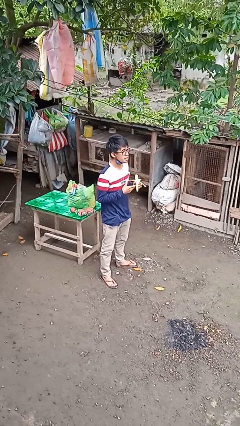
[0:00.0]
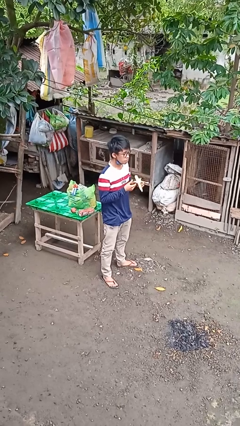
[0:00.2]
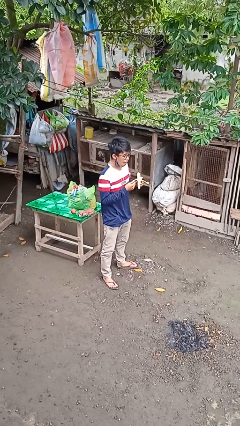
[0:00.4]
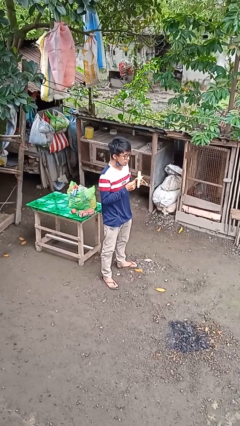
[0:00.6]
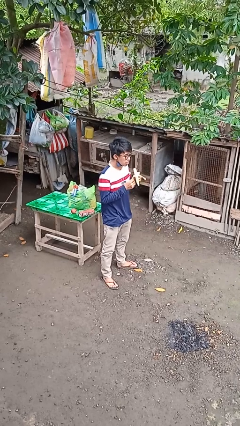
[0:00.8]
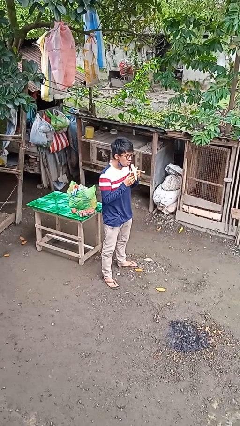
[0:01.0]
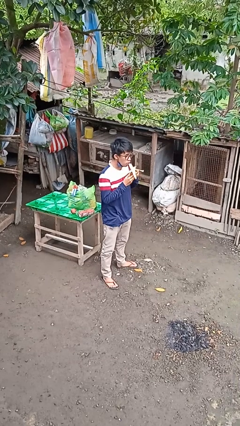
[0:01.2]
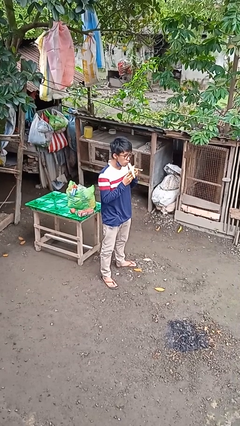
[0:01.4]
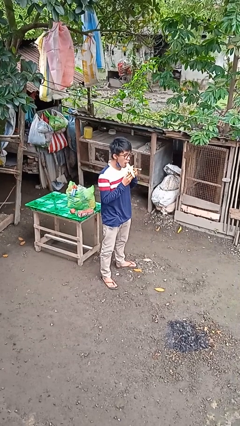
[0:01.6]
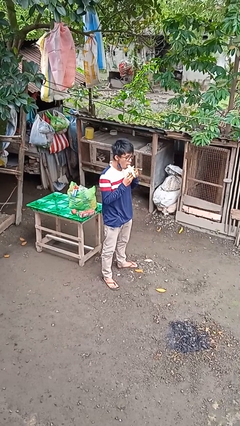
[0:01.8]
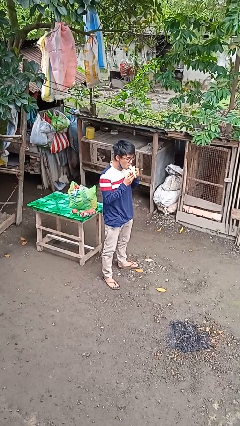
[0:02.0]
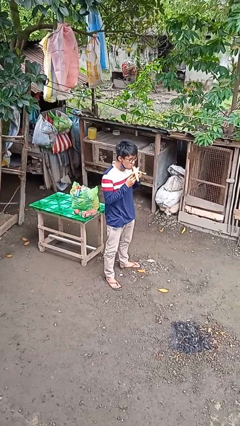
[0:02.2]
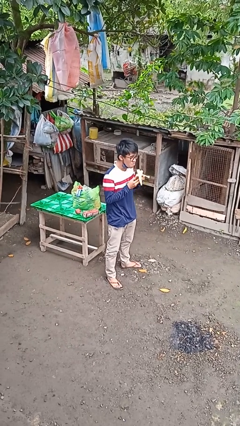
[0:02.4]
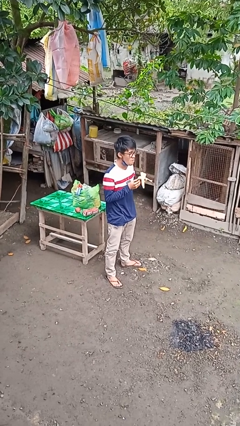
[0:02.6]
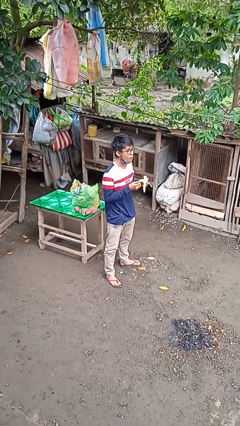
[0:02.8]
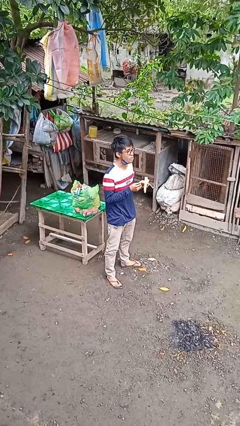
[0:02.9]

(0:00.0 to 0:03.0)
person eats banana

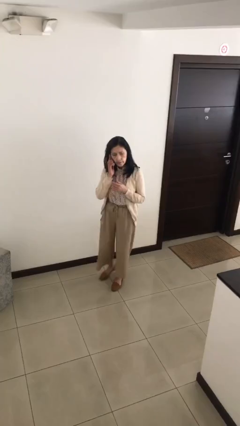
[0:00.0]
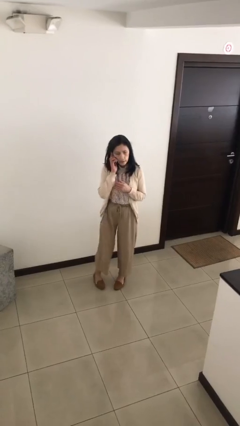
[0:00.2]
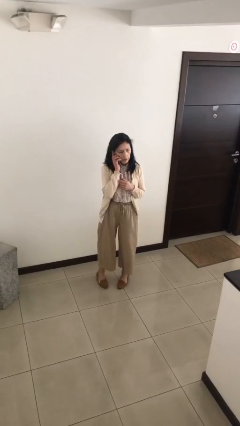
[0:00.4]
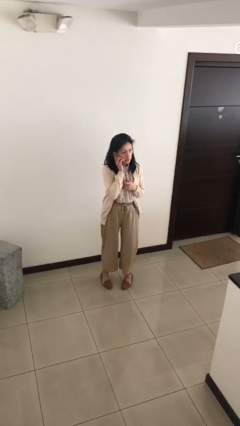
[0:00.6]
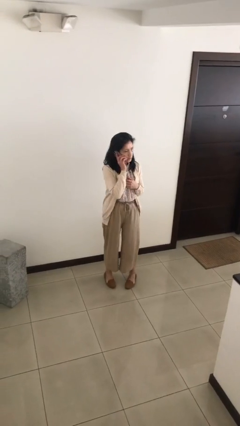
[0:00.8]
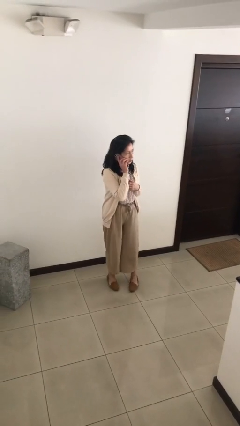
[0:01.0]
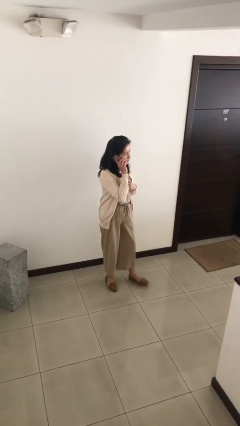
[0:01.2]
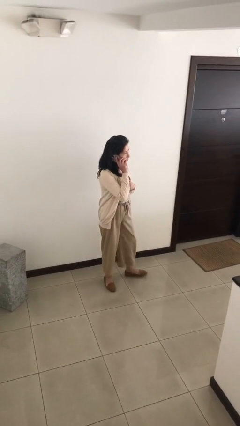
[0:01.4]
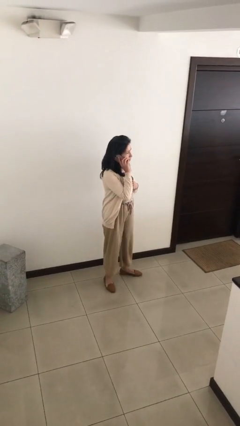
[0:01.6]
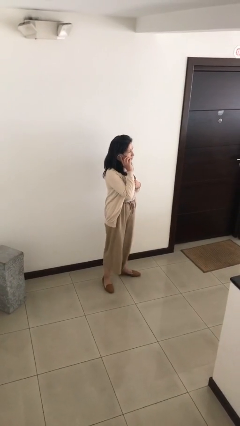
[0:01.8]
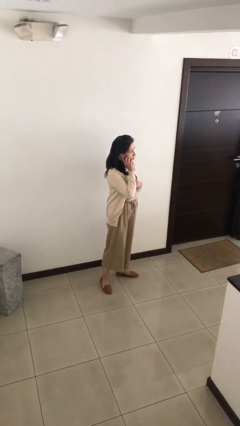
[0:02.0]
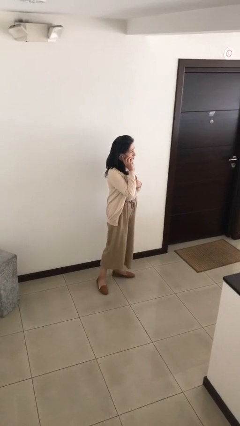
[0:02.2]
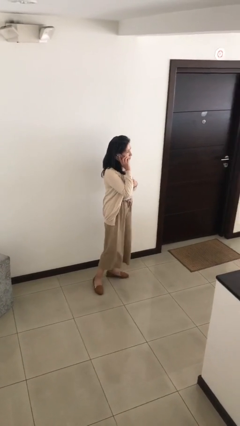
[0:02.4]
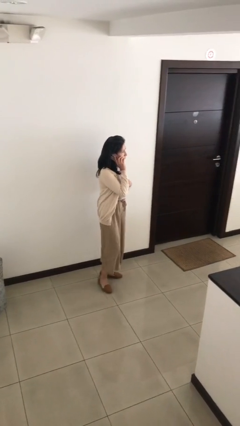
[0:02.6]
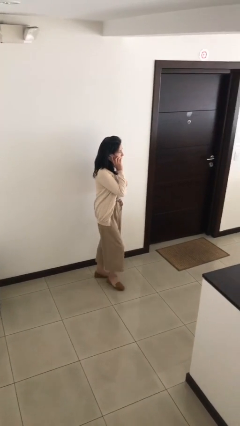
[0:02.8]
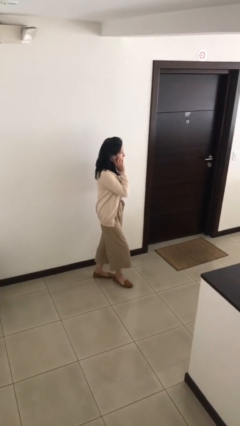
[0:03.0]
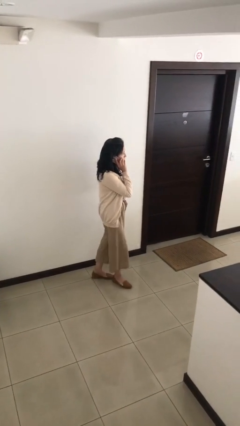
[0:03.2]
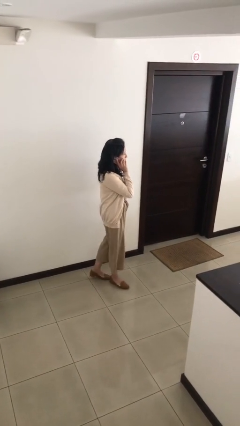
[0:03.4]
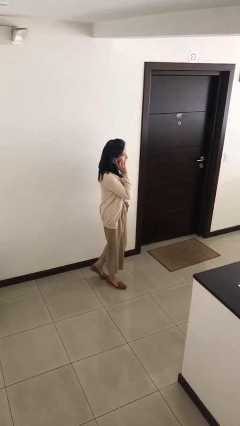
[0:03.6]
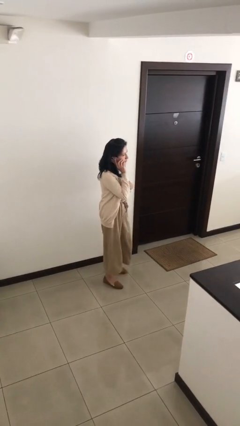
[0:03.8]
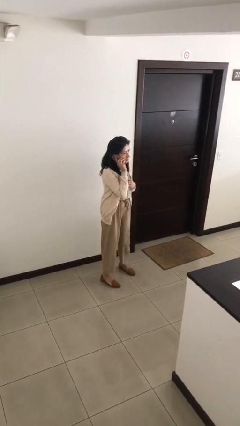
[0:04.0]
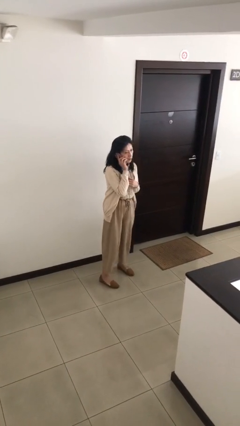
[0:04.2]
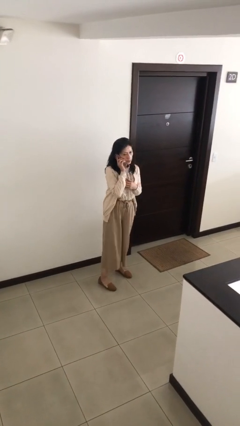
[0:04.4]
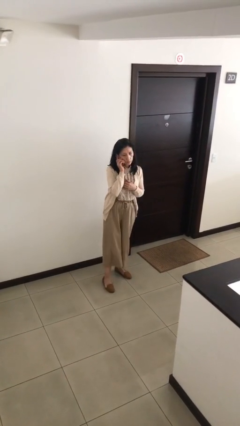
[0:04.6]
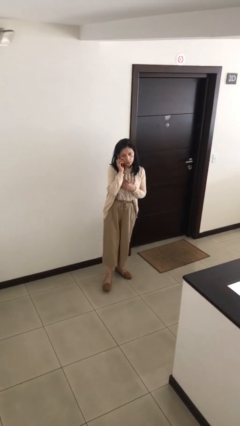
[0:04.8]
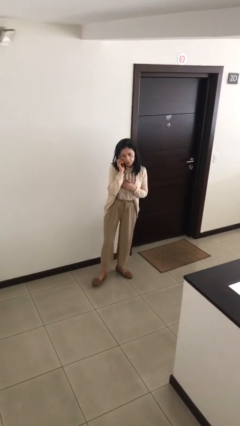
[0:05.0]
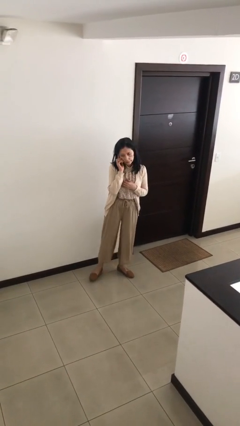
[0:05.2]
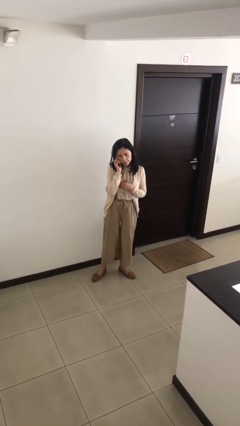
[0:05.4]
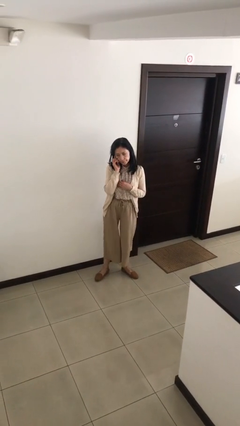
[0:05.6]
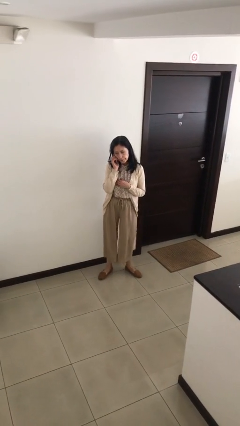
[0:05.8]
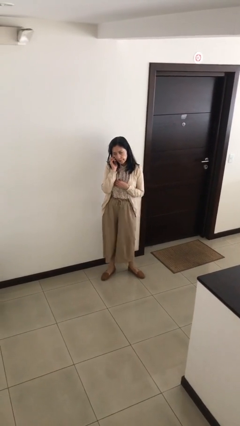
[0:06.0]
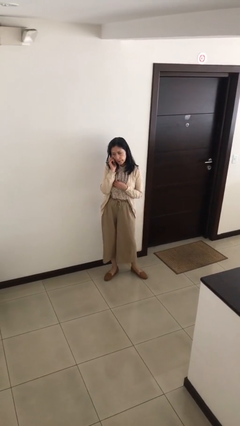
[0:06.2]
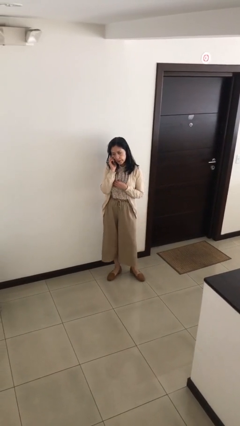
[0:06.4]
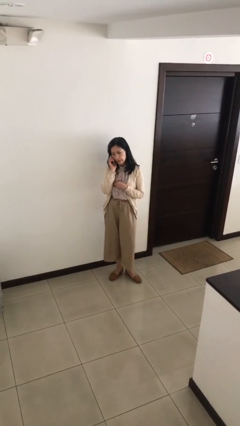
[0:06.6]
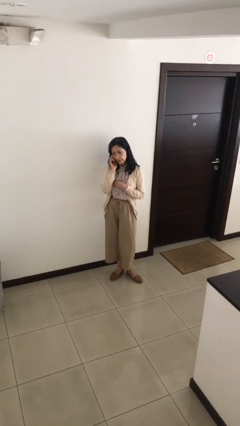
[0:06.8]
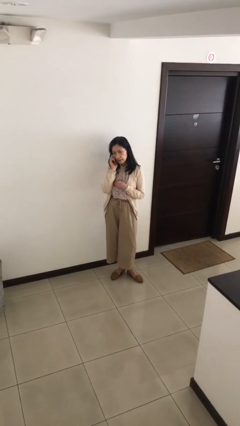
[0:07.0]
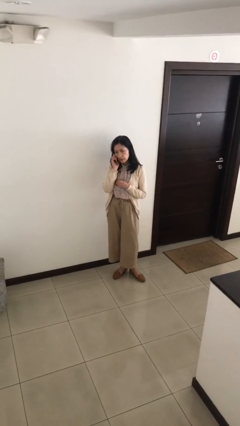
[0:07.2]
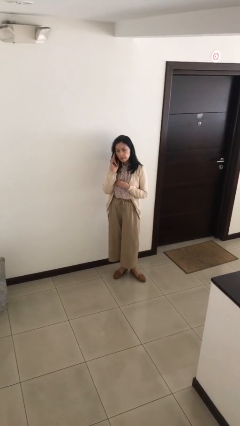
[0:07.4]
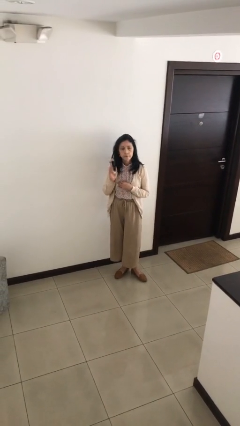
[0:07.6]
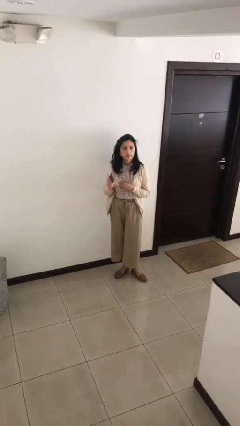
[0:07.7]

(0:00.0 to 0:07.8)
person talks on phone

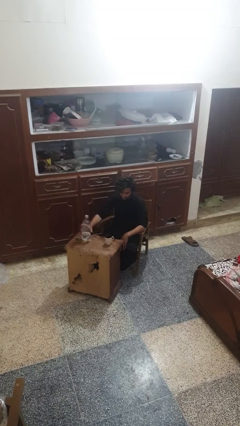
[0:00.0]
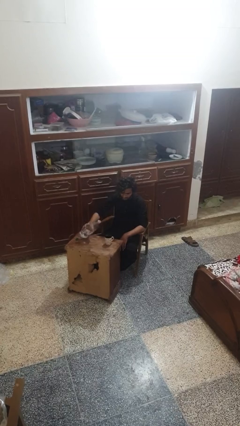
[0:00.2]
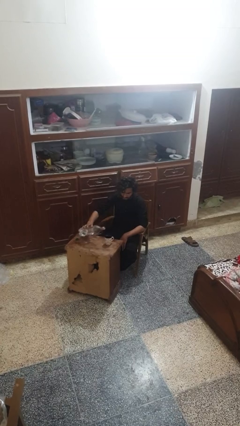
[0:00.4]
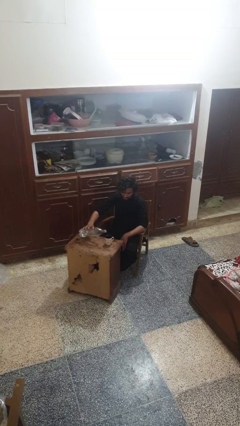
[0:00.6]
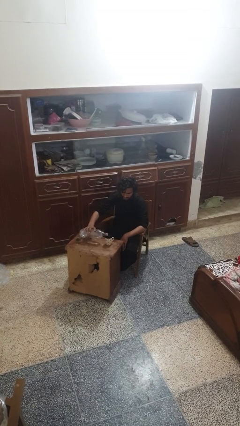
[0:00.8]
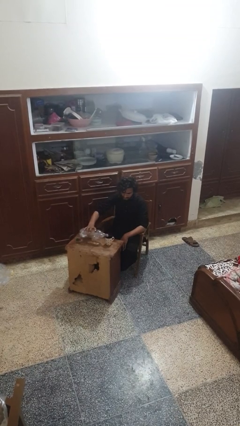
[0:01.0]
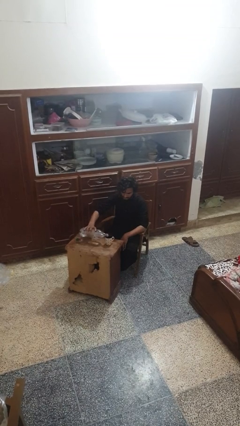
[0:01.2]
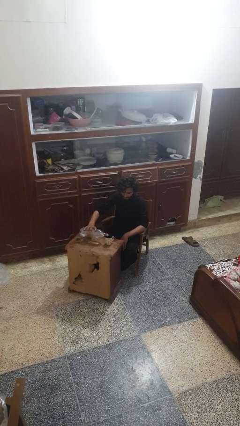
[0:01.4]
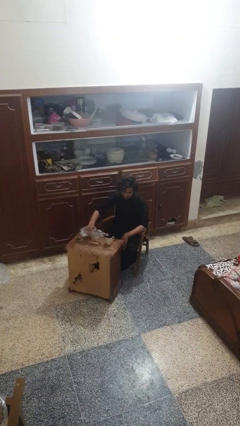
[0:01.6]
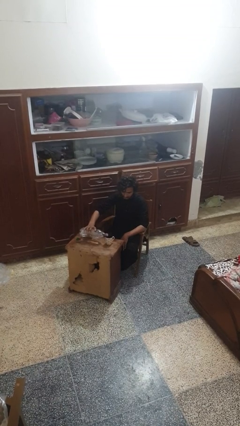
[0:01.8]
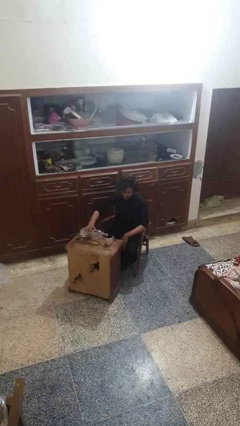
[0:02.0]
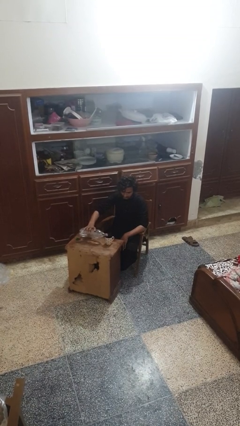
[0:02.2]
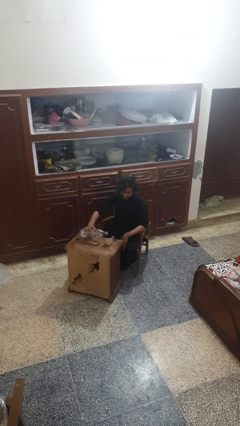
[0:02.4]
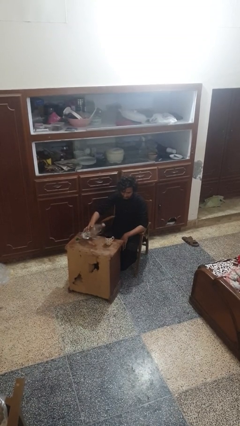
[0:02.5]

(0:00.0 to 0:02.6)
person pours liquid into cup

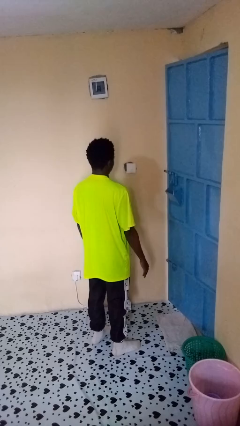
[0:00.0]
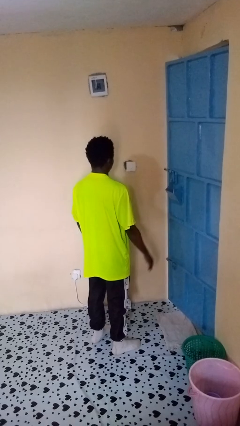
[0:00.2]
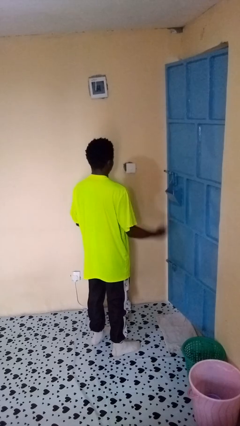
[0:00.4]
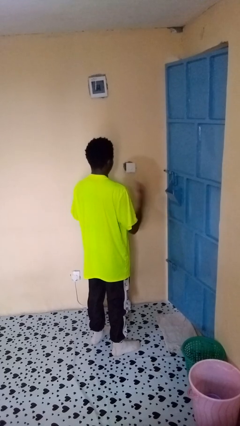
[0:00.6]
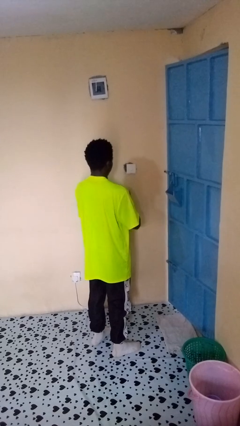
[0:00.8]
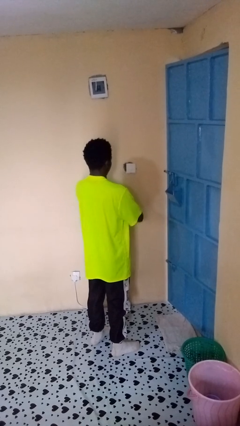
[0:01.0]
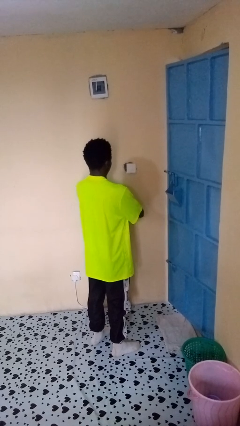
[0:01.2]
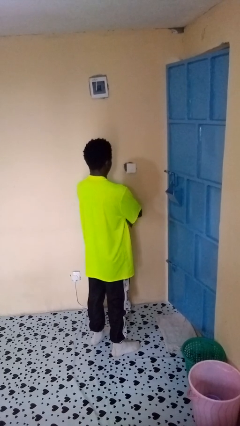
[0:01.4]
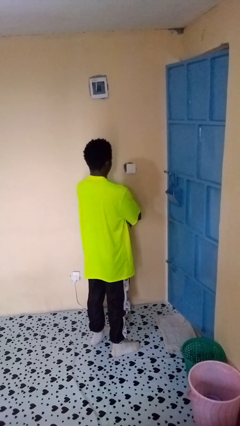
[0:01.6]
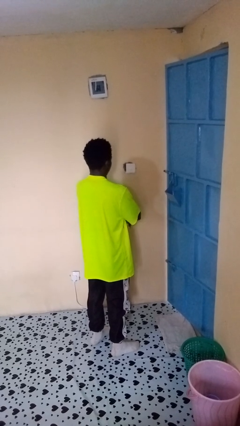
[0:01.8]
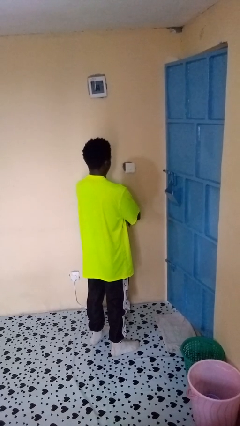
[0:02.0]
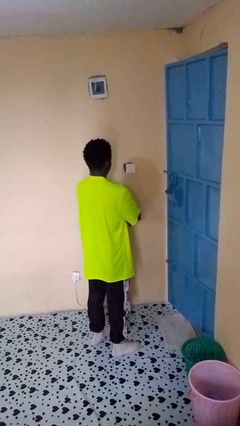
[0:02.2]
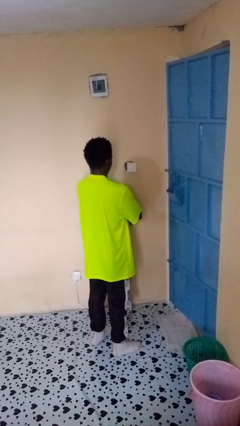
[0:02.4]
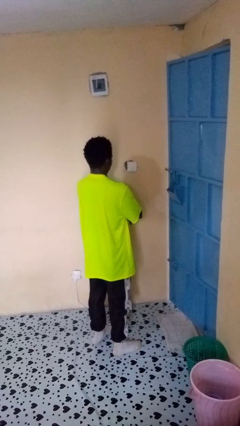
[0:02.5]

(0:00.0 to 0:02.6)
person crosses arms

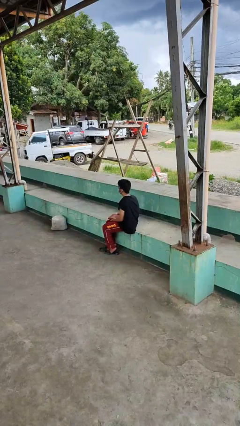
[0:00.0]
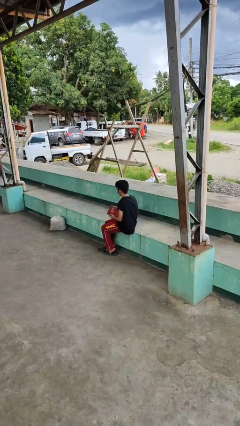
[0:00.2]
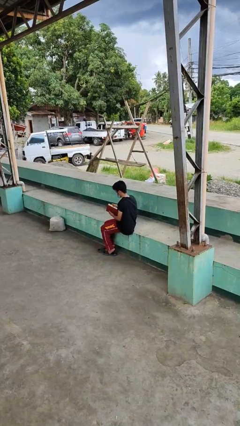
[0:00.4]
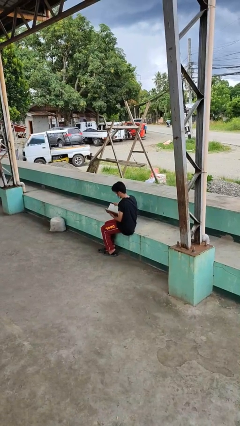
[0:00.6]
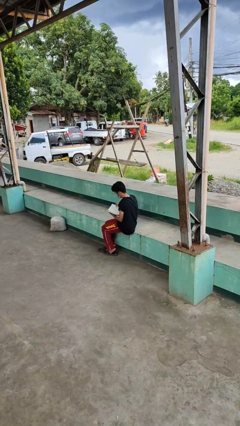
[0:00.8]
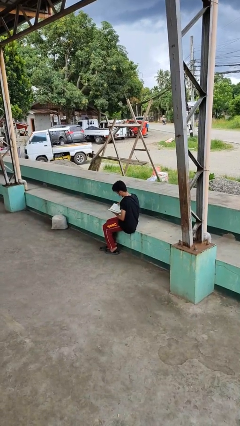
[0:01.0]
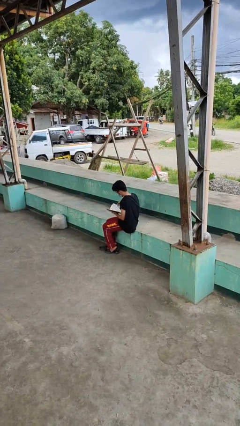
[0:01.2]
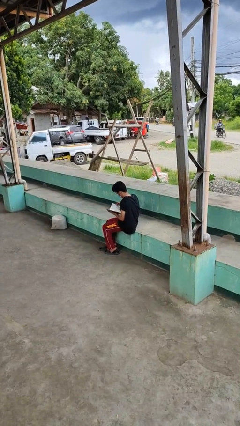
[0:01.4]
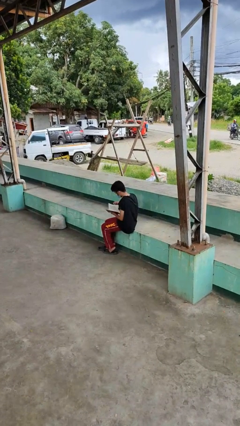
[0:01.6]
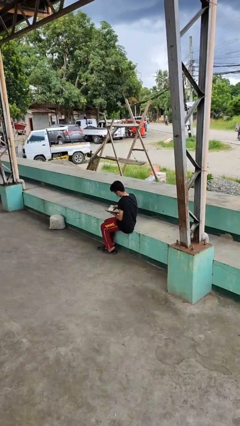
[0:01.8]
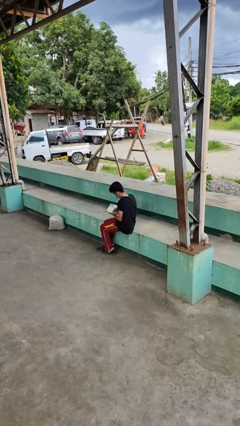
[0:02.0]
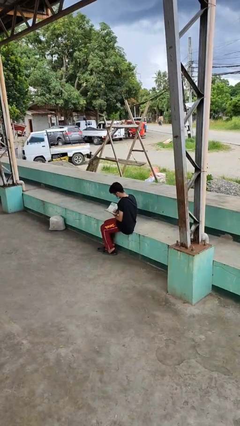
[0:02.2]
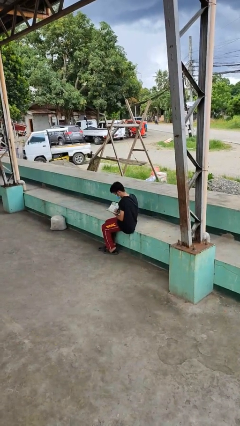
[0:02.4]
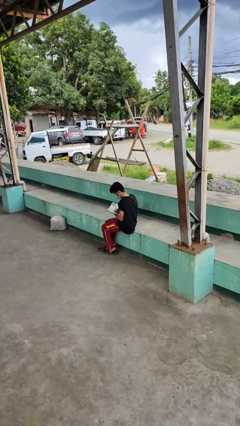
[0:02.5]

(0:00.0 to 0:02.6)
person reads book
